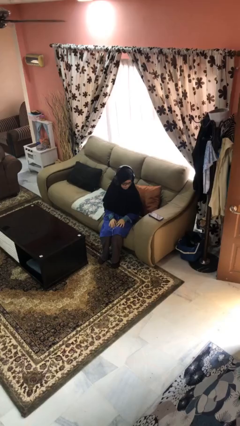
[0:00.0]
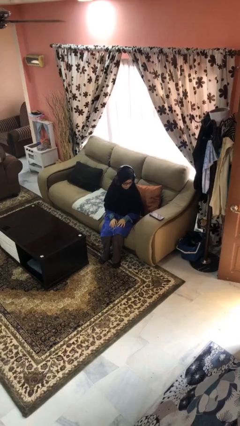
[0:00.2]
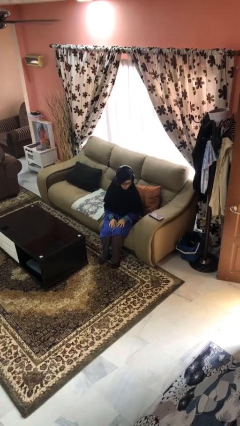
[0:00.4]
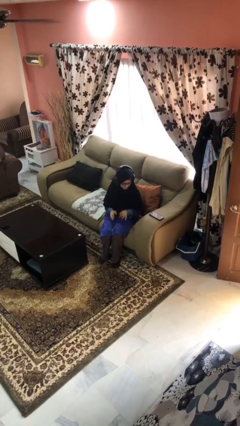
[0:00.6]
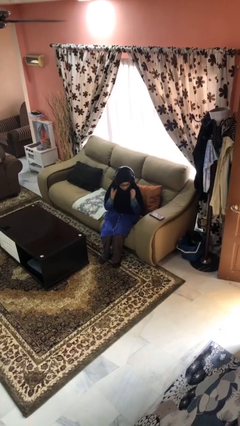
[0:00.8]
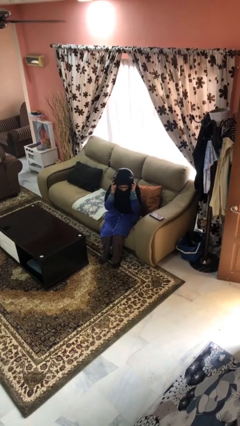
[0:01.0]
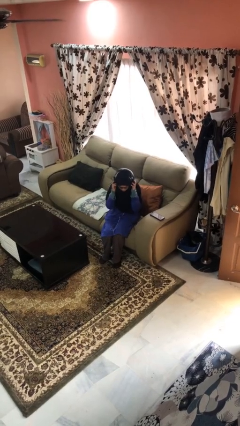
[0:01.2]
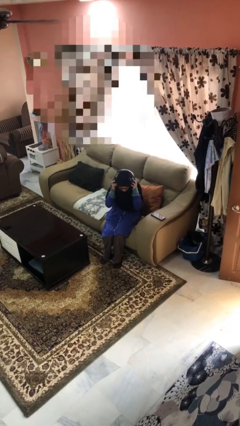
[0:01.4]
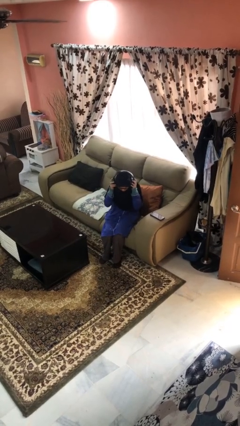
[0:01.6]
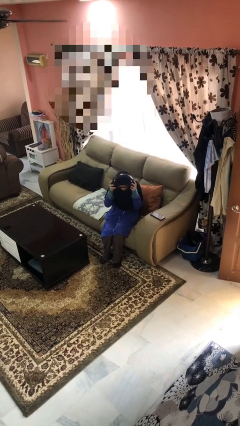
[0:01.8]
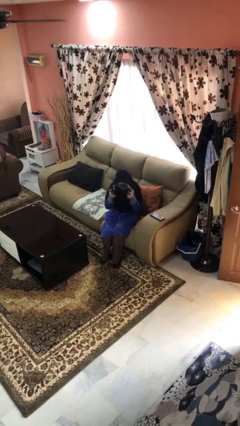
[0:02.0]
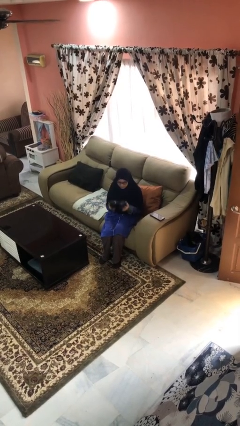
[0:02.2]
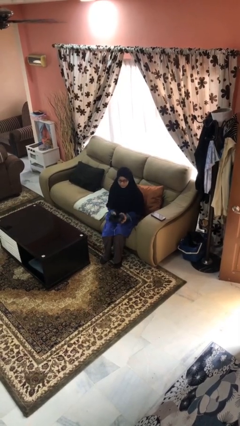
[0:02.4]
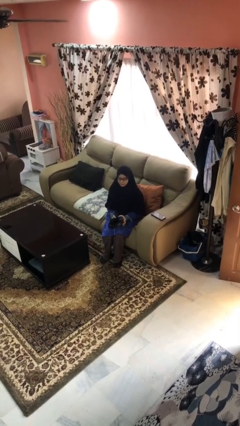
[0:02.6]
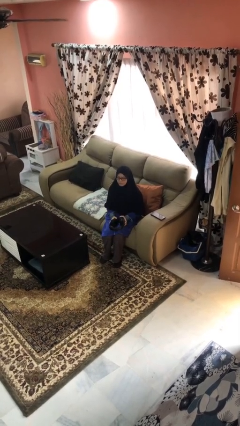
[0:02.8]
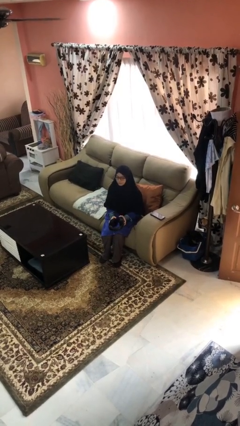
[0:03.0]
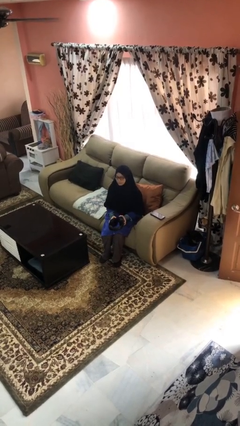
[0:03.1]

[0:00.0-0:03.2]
person takes off headphones

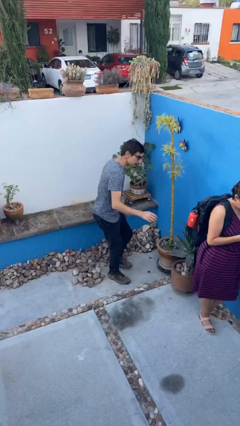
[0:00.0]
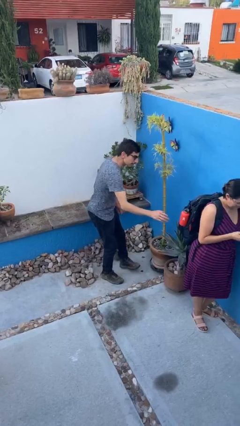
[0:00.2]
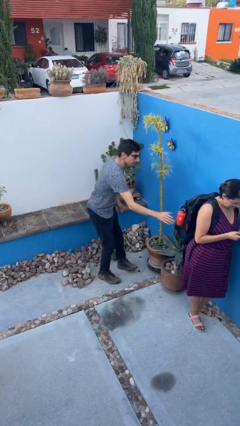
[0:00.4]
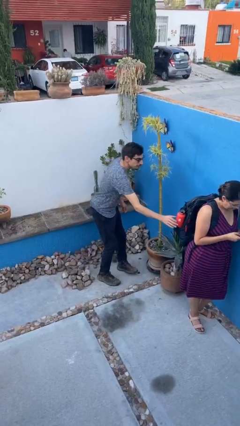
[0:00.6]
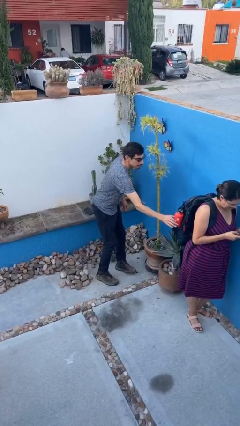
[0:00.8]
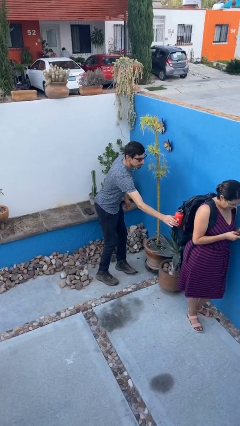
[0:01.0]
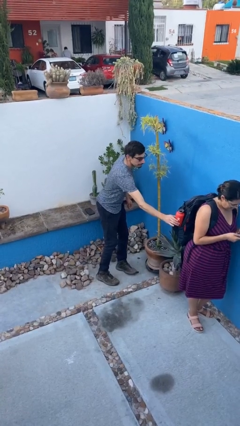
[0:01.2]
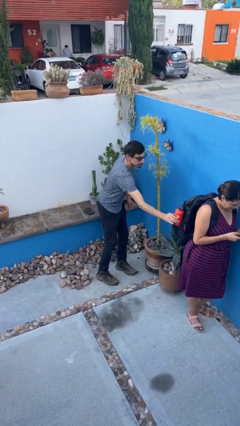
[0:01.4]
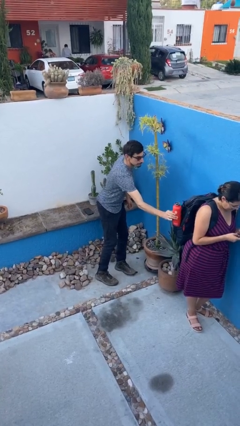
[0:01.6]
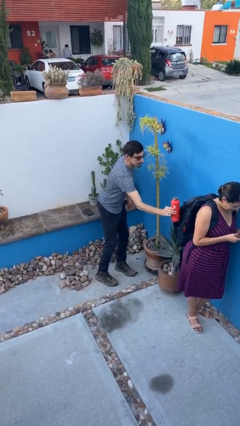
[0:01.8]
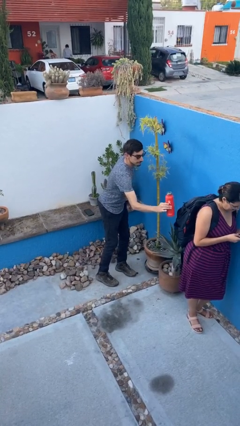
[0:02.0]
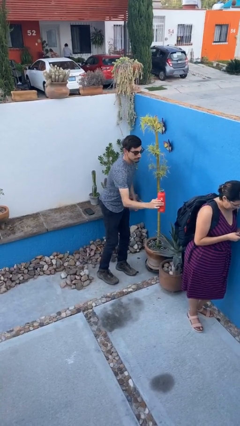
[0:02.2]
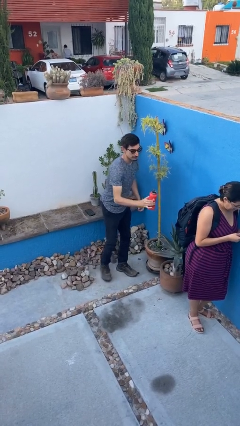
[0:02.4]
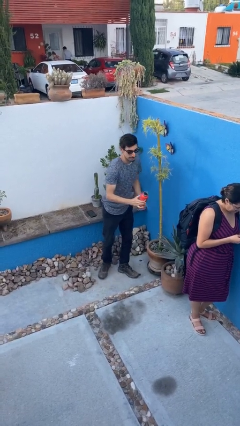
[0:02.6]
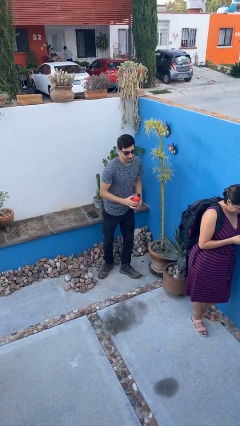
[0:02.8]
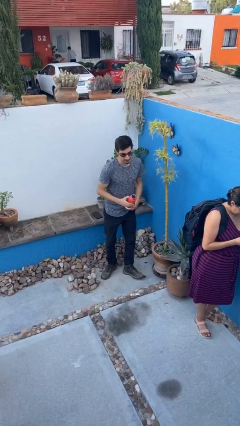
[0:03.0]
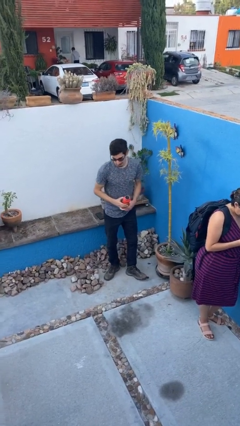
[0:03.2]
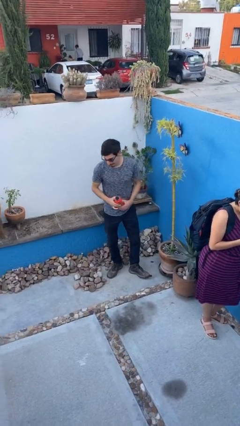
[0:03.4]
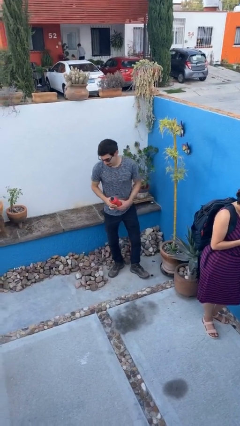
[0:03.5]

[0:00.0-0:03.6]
person steals object from person

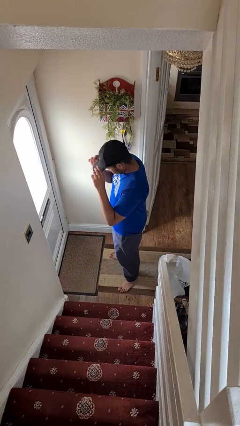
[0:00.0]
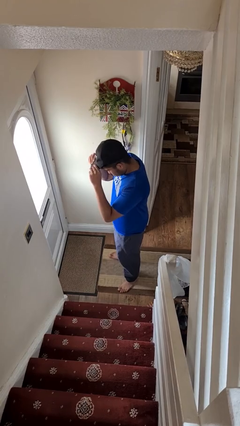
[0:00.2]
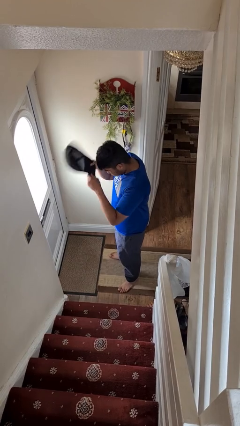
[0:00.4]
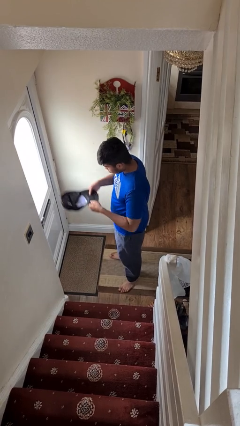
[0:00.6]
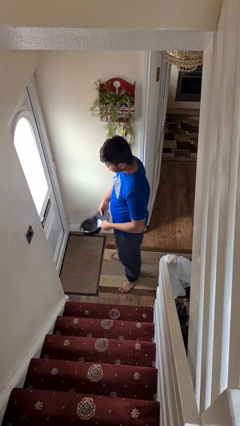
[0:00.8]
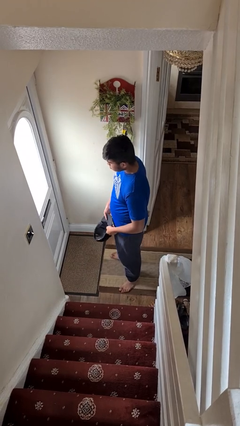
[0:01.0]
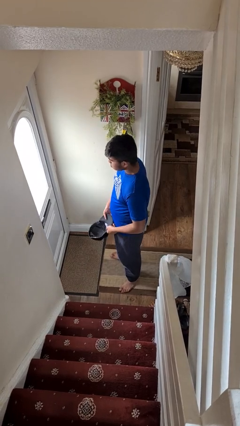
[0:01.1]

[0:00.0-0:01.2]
person takes off hat

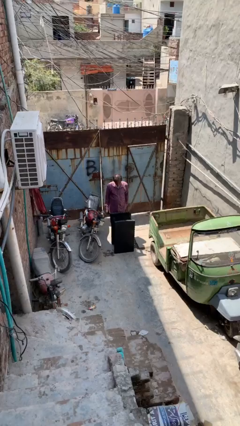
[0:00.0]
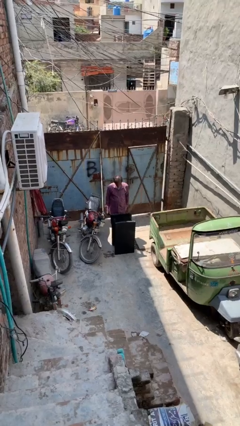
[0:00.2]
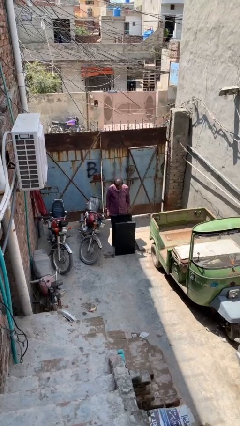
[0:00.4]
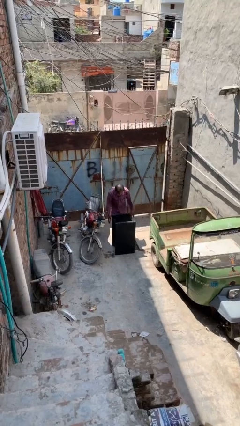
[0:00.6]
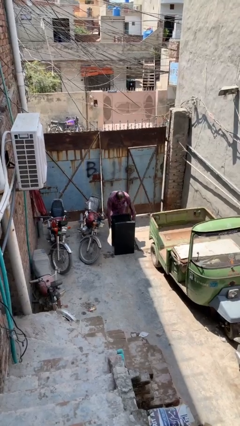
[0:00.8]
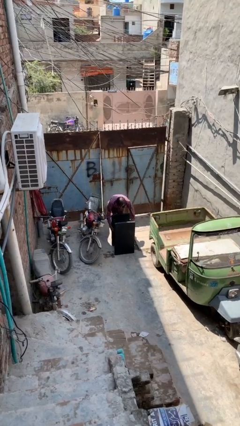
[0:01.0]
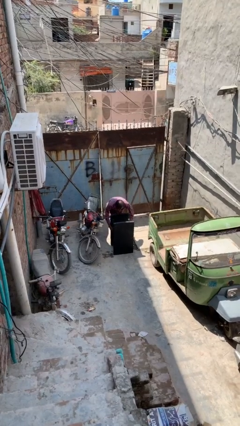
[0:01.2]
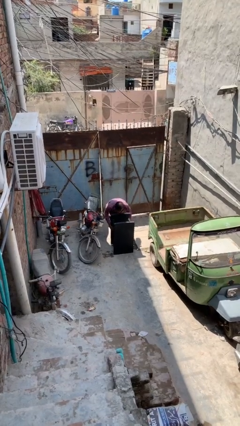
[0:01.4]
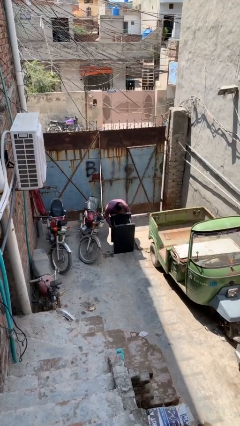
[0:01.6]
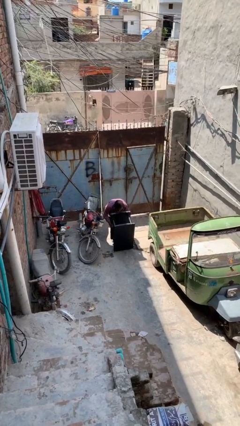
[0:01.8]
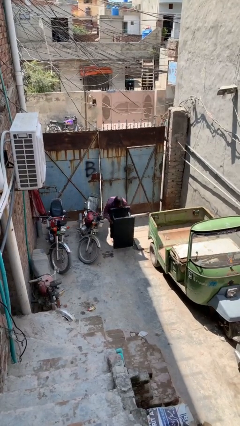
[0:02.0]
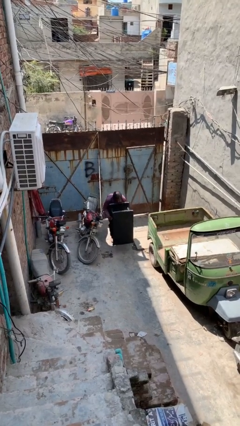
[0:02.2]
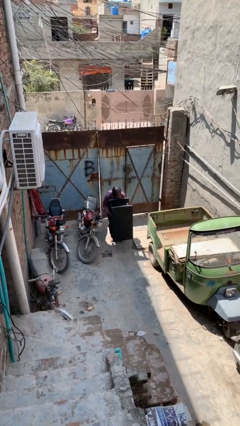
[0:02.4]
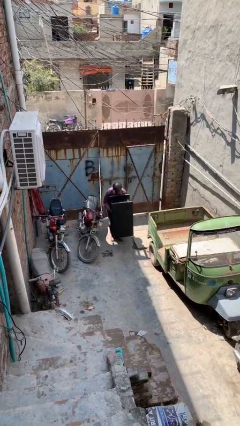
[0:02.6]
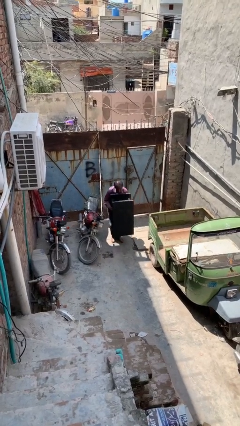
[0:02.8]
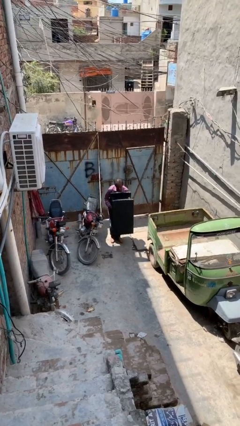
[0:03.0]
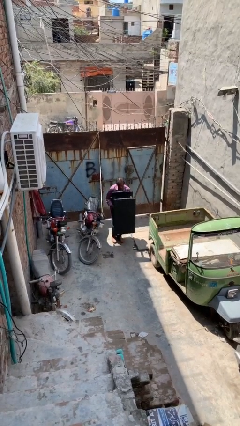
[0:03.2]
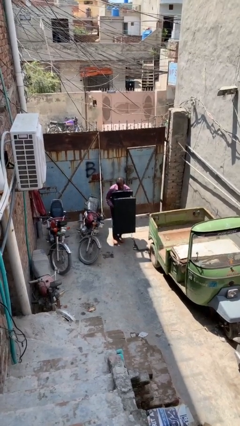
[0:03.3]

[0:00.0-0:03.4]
person picks up object from floor

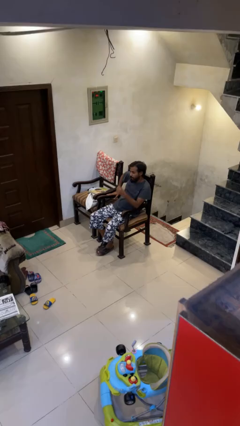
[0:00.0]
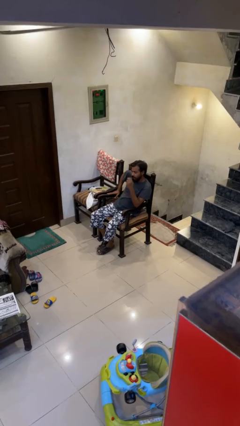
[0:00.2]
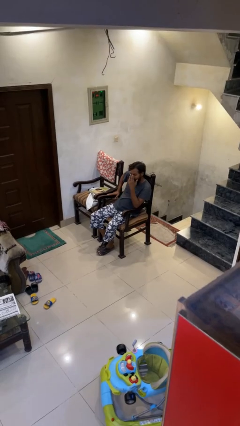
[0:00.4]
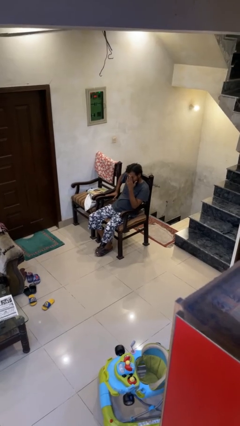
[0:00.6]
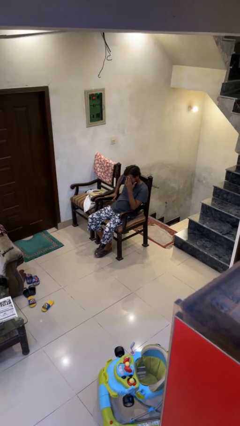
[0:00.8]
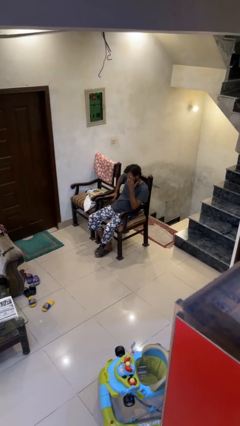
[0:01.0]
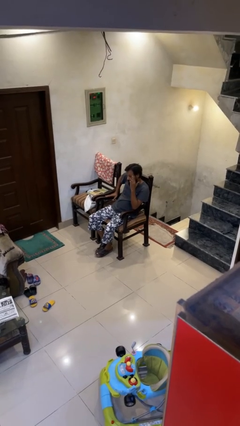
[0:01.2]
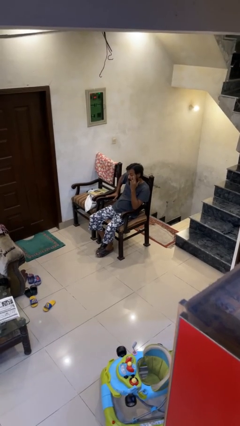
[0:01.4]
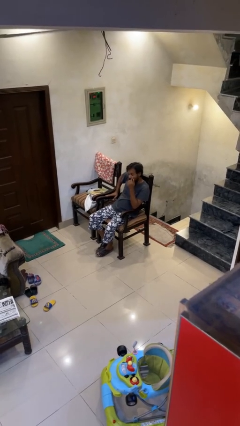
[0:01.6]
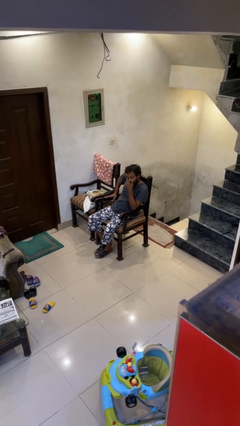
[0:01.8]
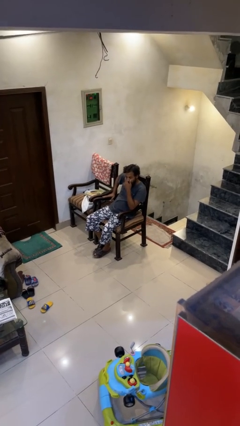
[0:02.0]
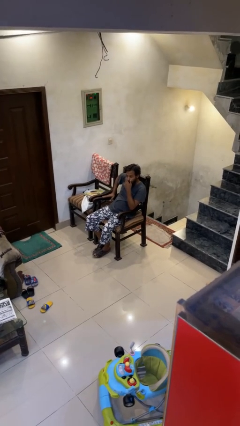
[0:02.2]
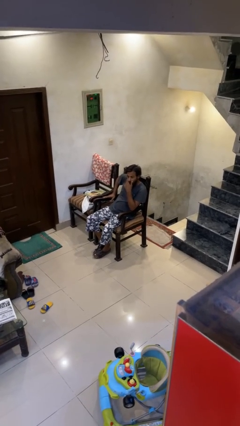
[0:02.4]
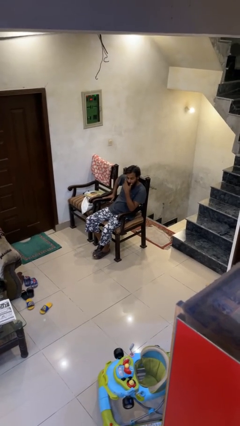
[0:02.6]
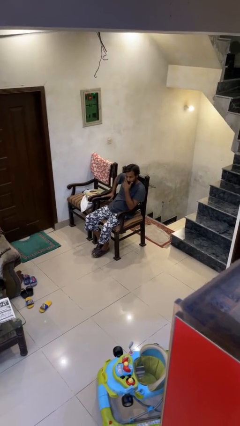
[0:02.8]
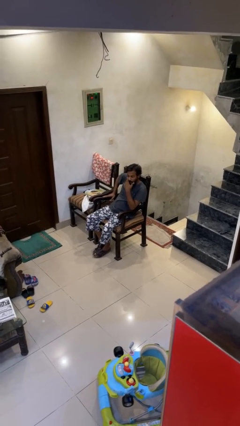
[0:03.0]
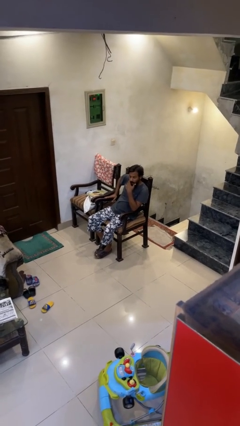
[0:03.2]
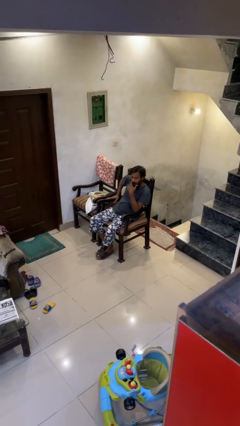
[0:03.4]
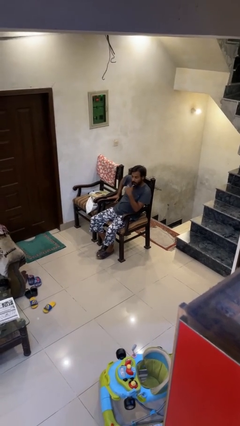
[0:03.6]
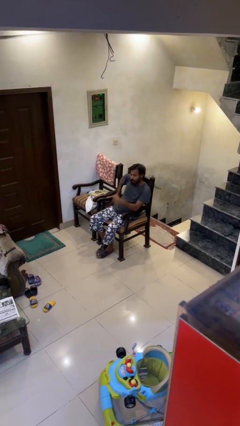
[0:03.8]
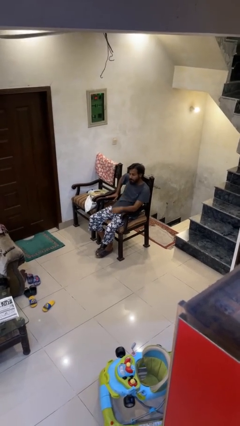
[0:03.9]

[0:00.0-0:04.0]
person scratches face

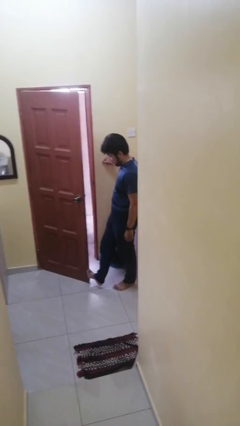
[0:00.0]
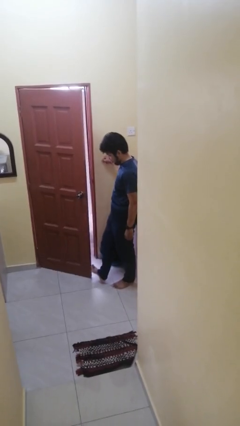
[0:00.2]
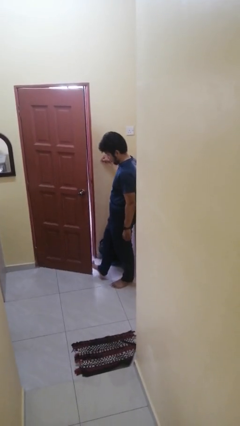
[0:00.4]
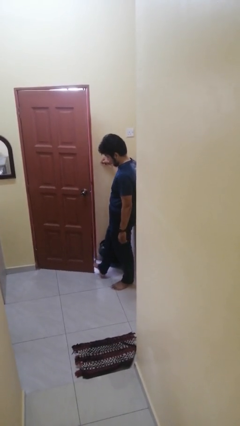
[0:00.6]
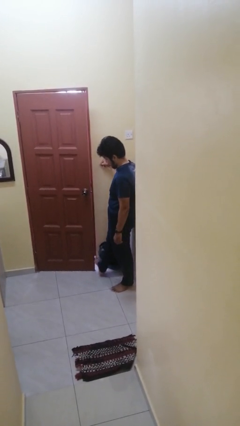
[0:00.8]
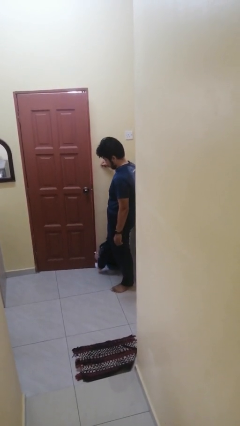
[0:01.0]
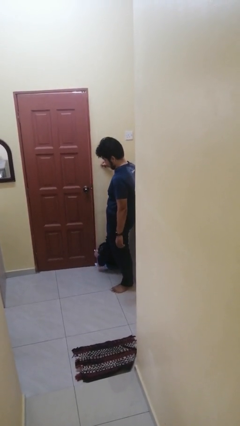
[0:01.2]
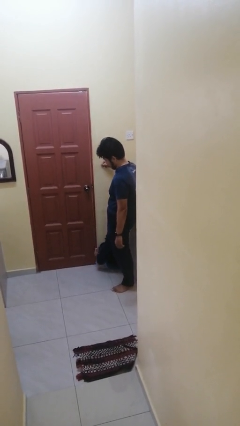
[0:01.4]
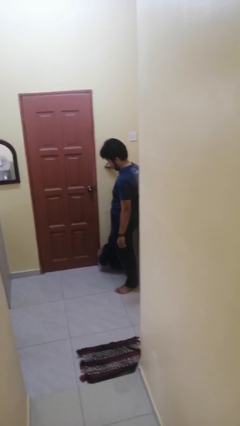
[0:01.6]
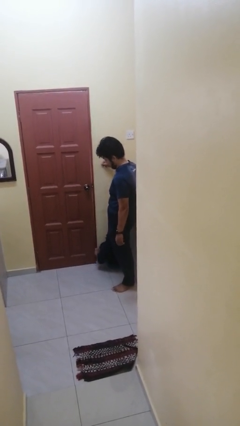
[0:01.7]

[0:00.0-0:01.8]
person closes door with foot
